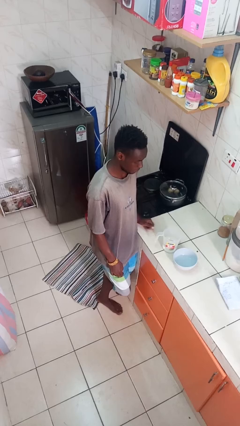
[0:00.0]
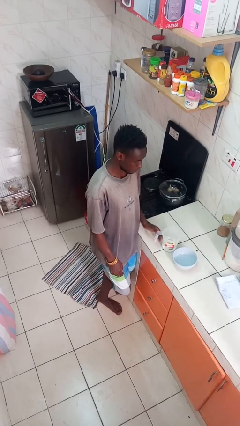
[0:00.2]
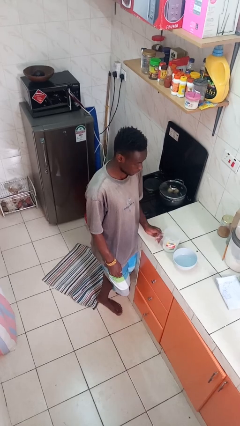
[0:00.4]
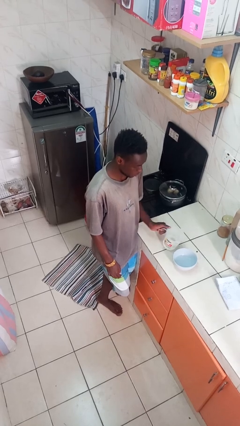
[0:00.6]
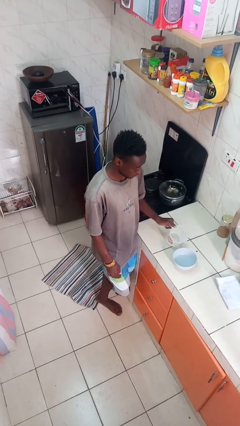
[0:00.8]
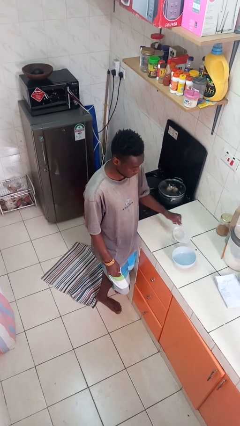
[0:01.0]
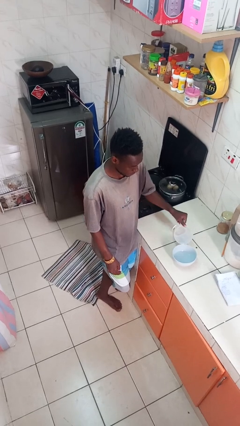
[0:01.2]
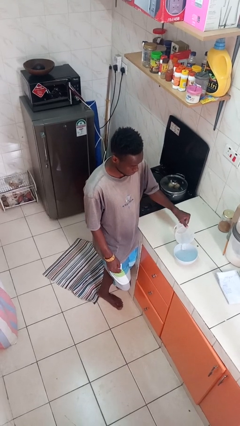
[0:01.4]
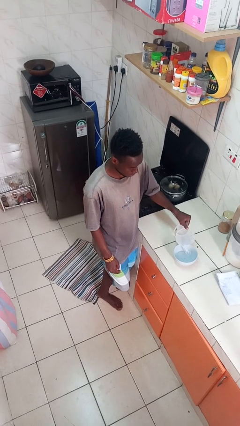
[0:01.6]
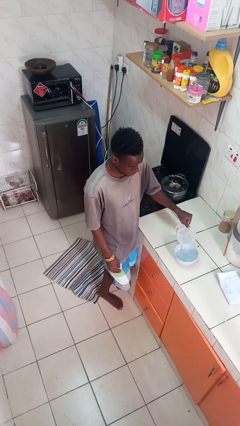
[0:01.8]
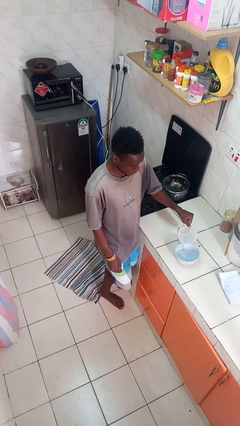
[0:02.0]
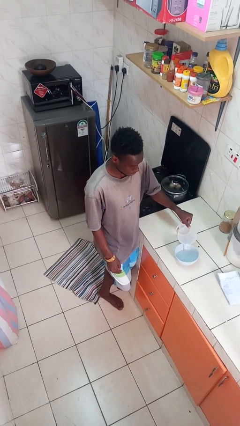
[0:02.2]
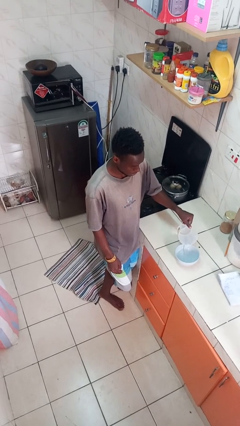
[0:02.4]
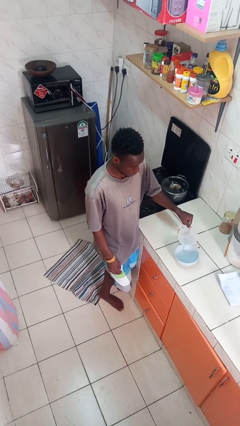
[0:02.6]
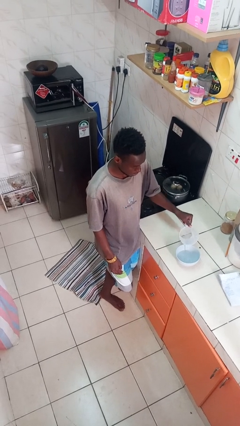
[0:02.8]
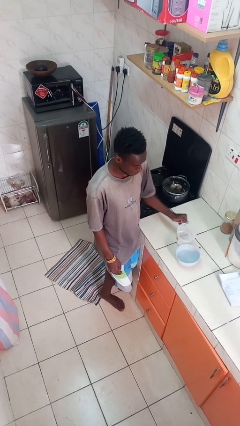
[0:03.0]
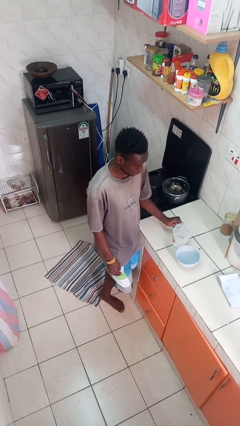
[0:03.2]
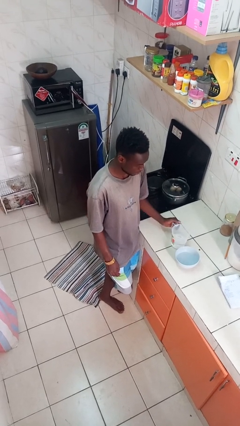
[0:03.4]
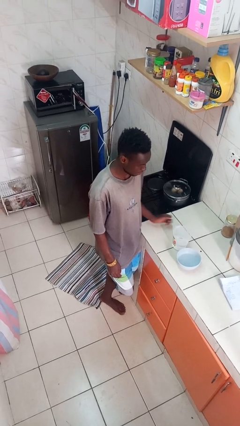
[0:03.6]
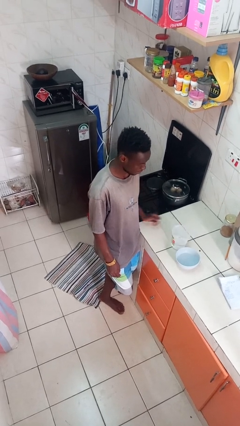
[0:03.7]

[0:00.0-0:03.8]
person pours into bowl

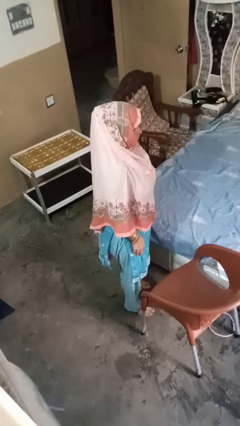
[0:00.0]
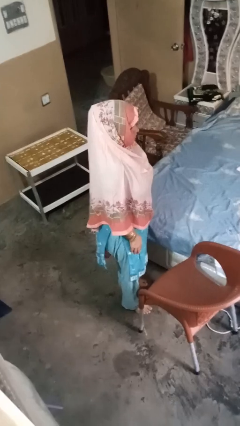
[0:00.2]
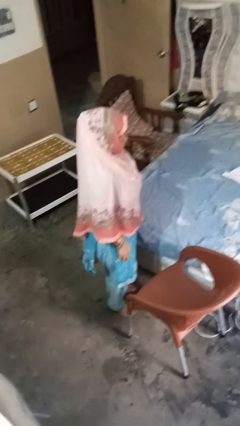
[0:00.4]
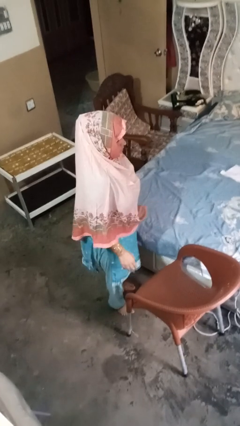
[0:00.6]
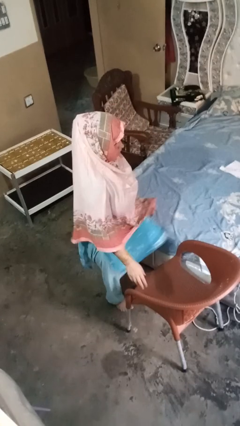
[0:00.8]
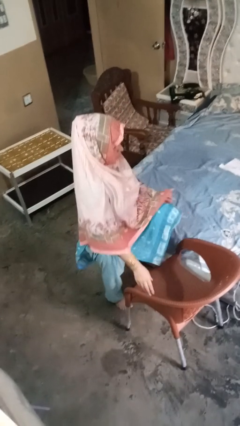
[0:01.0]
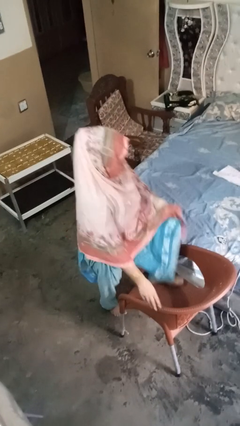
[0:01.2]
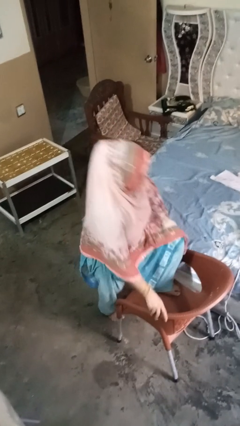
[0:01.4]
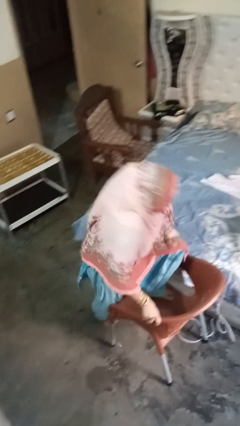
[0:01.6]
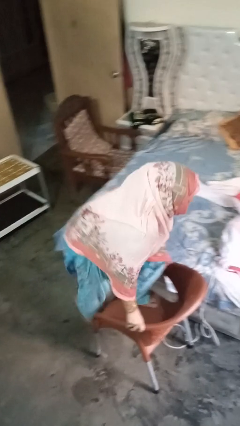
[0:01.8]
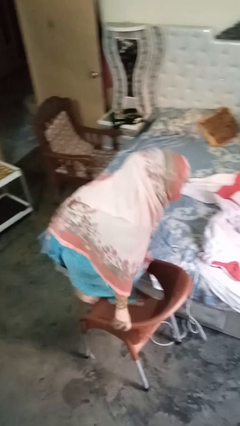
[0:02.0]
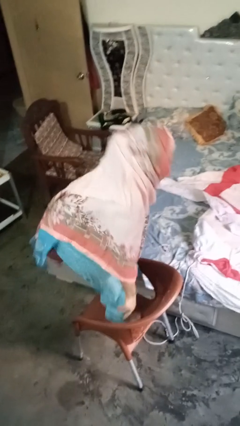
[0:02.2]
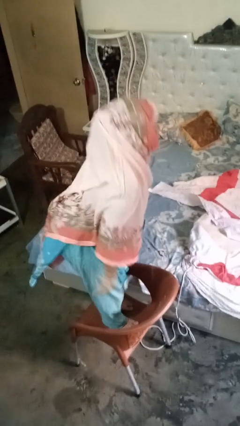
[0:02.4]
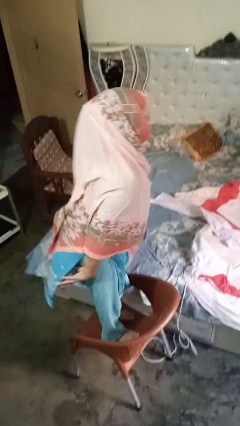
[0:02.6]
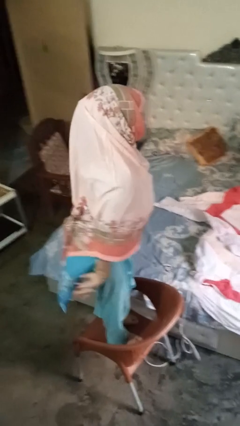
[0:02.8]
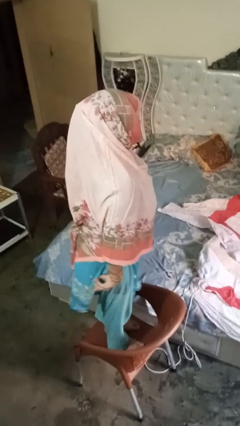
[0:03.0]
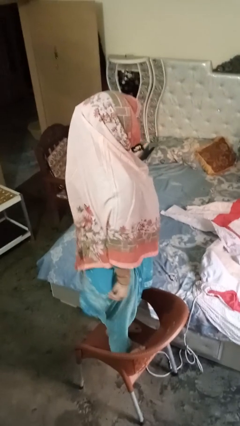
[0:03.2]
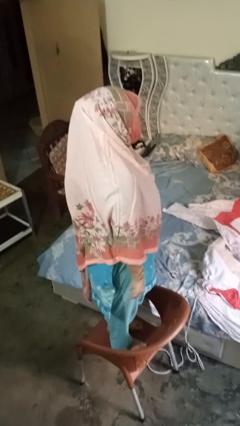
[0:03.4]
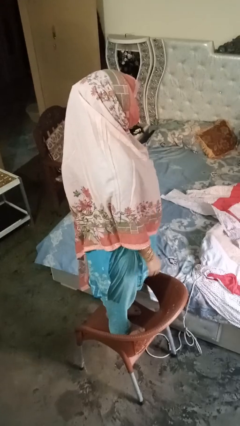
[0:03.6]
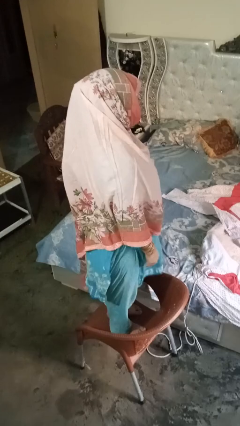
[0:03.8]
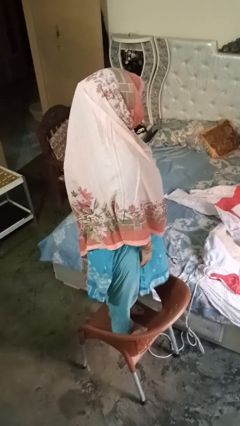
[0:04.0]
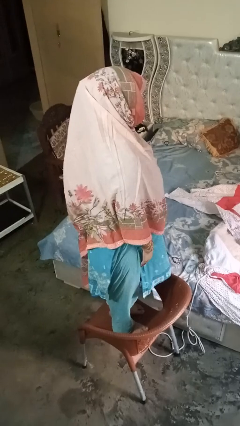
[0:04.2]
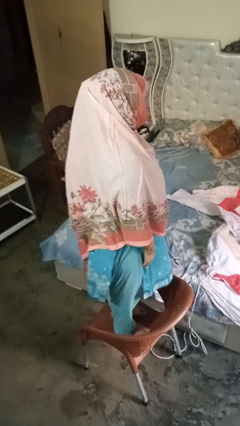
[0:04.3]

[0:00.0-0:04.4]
person climbs on chair

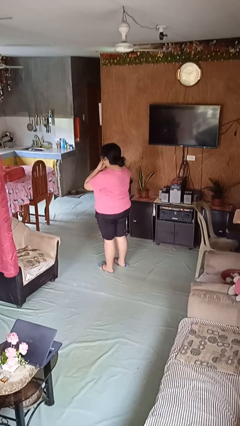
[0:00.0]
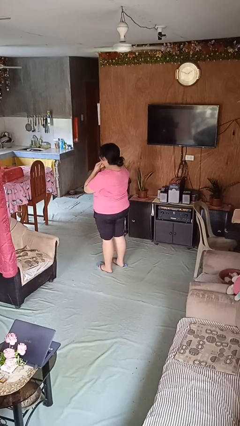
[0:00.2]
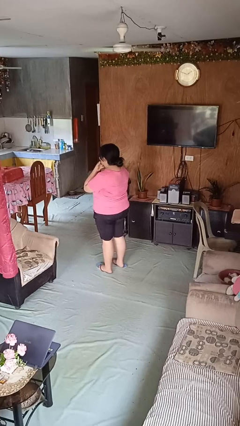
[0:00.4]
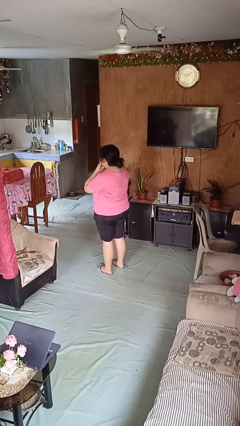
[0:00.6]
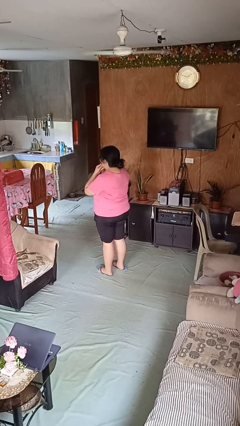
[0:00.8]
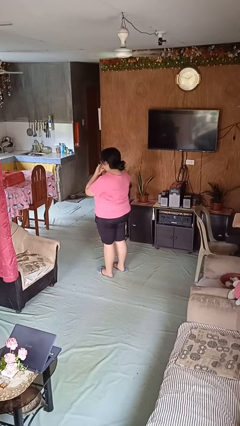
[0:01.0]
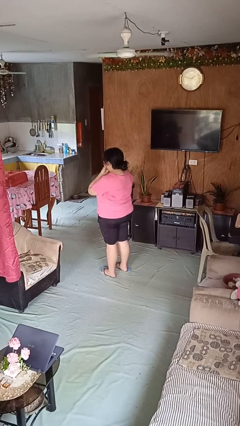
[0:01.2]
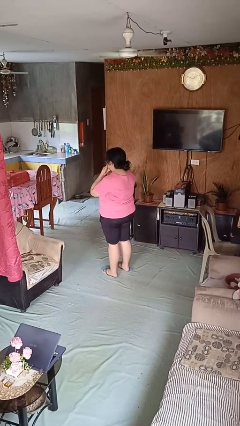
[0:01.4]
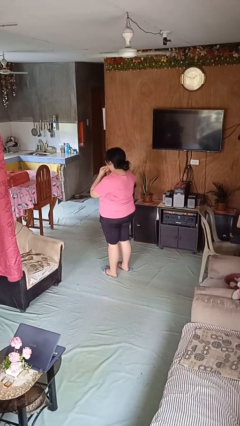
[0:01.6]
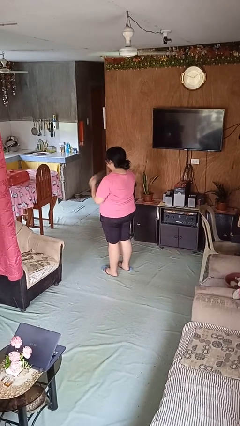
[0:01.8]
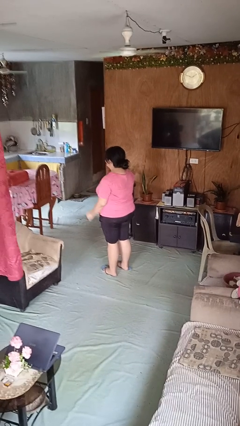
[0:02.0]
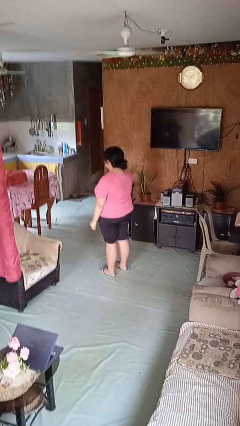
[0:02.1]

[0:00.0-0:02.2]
person strokes chin

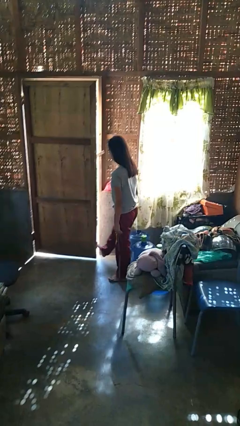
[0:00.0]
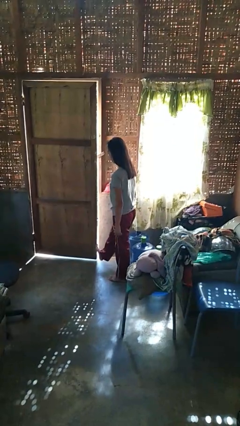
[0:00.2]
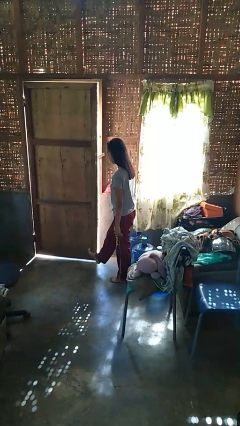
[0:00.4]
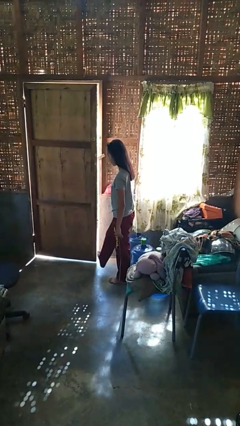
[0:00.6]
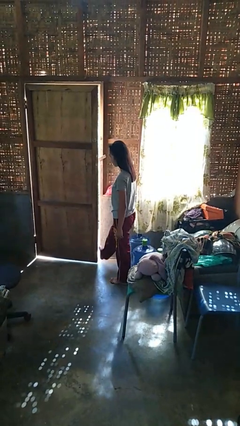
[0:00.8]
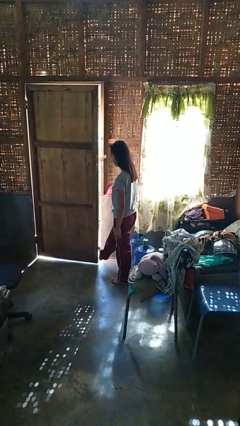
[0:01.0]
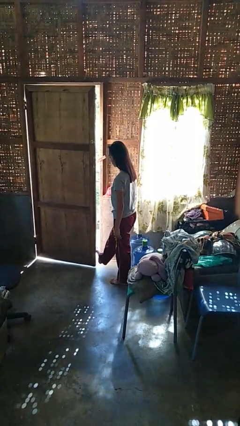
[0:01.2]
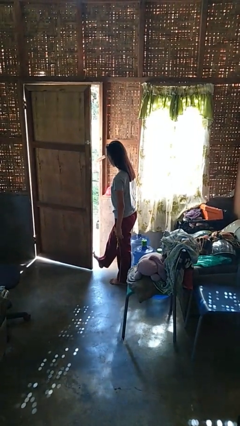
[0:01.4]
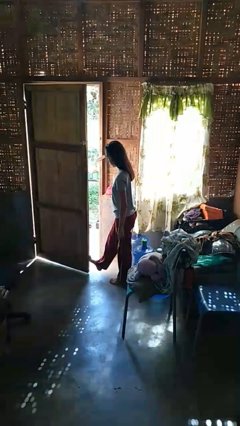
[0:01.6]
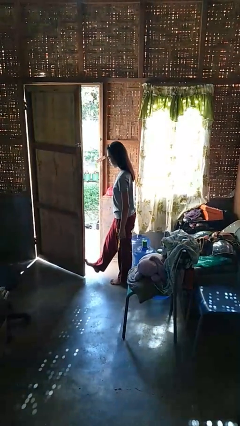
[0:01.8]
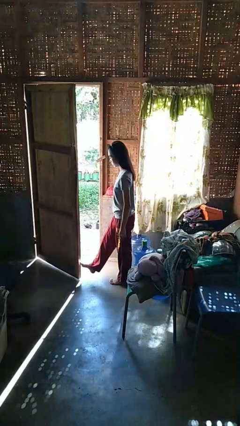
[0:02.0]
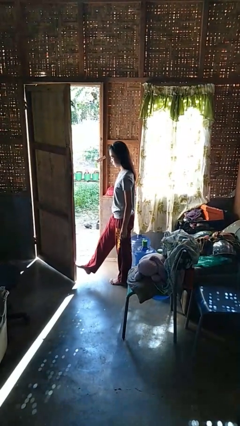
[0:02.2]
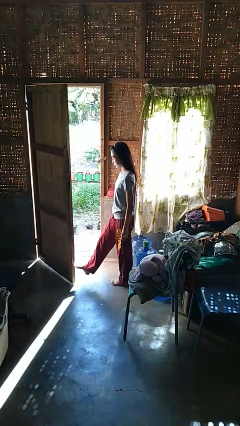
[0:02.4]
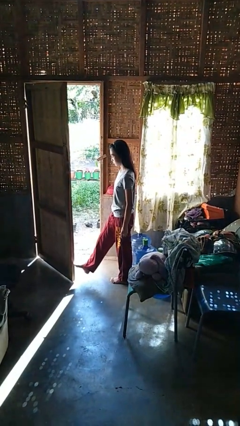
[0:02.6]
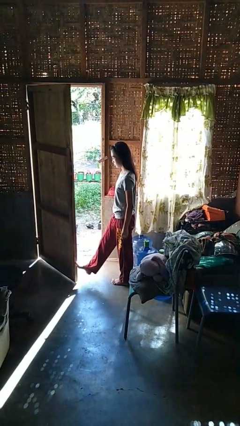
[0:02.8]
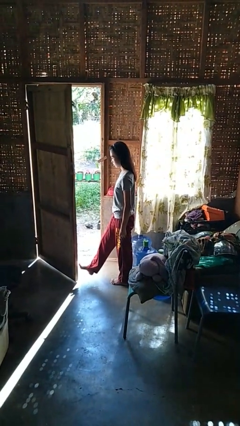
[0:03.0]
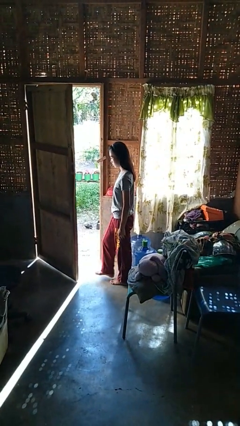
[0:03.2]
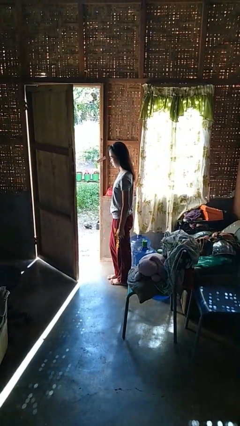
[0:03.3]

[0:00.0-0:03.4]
person opens facility door

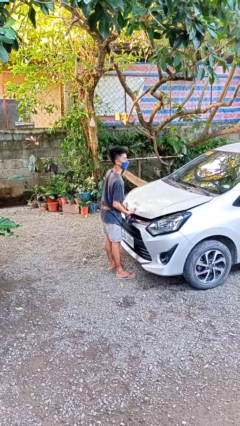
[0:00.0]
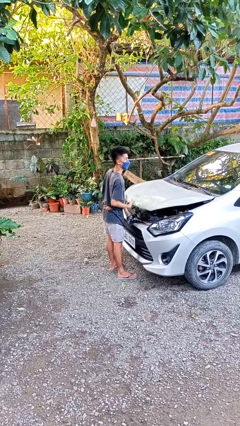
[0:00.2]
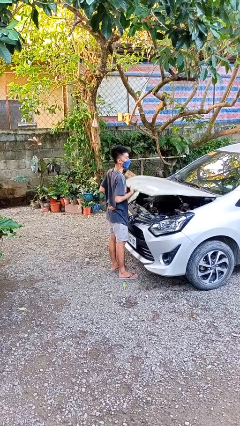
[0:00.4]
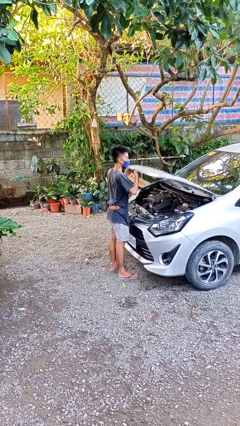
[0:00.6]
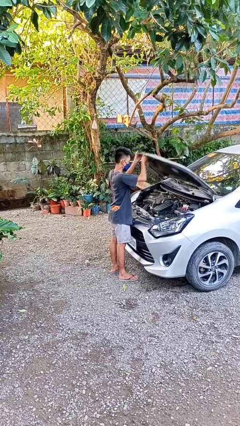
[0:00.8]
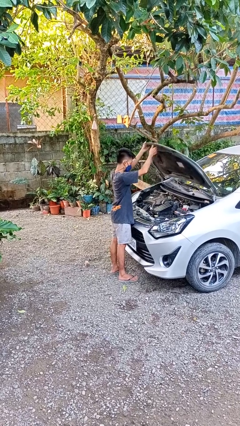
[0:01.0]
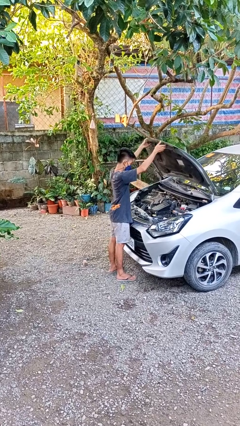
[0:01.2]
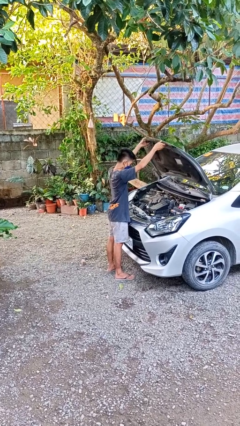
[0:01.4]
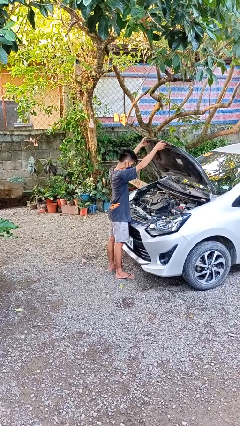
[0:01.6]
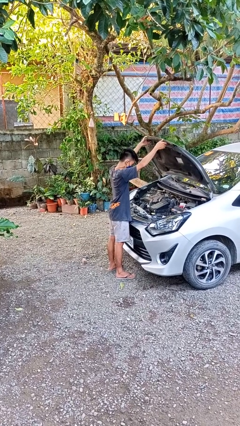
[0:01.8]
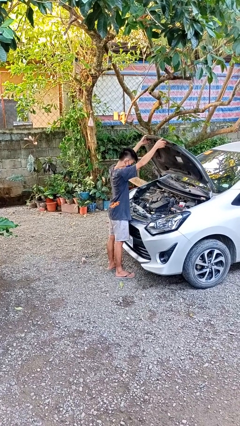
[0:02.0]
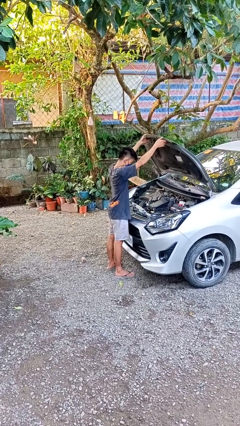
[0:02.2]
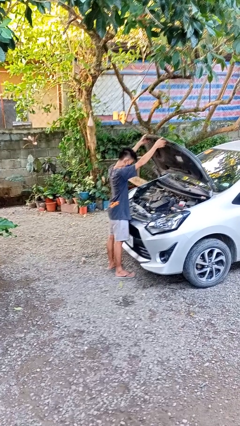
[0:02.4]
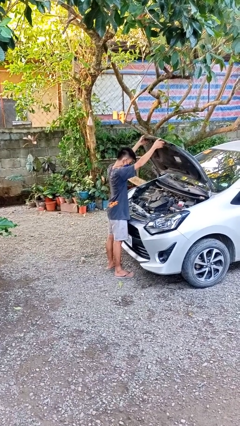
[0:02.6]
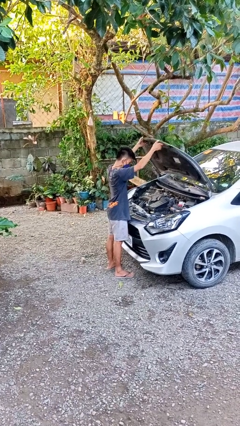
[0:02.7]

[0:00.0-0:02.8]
person opens car hood

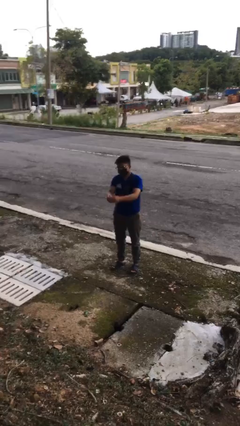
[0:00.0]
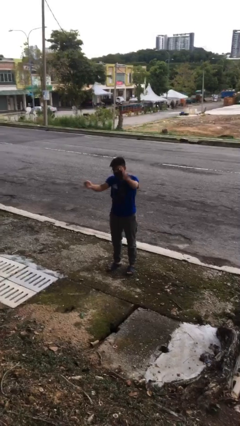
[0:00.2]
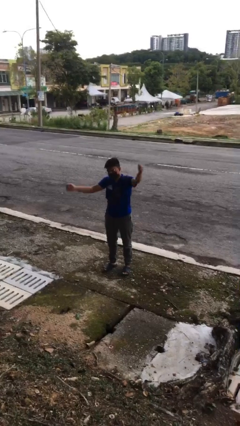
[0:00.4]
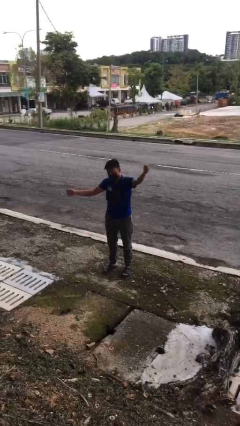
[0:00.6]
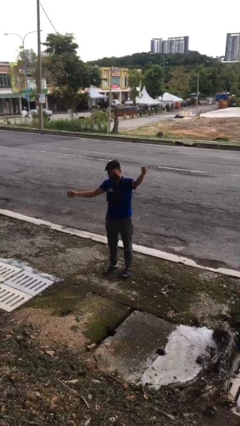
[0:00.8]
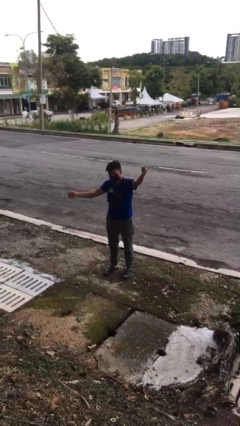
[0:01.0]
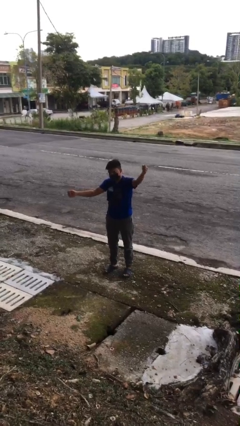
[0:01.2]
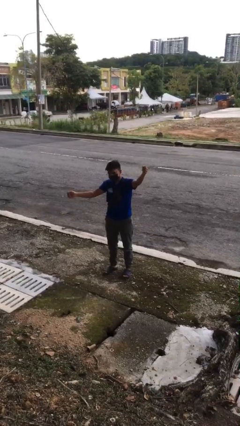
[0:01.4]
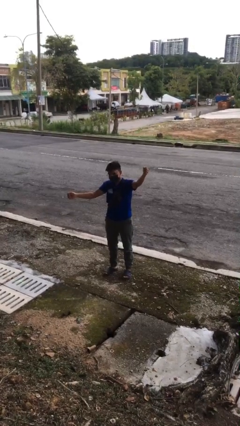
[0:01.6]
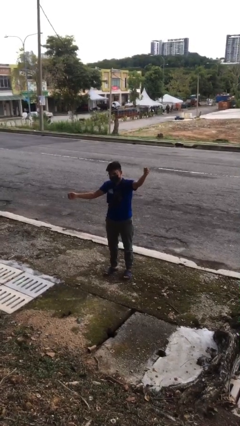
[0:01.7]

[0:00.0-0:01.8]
person gestures zoom in
